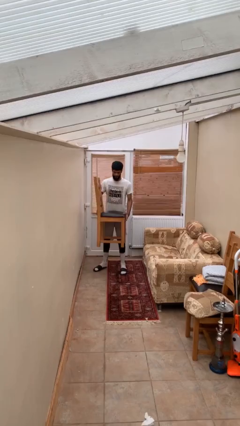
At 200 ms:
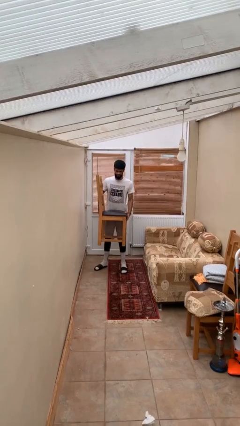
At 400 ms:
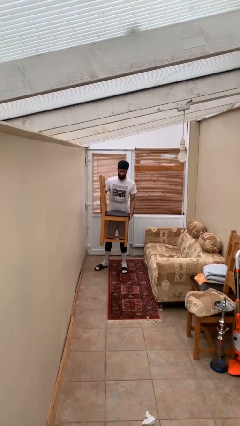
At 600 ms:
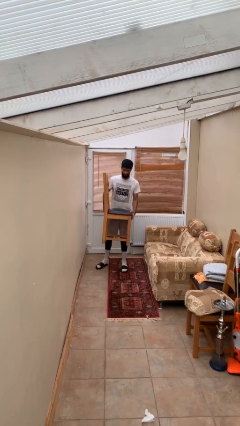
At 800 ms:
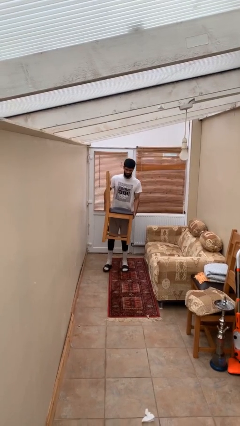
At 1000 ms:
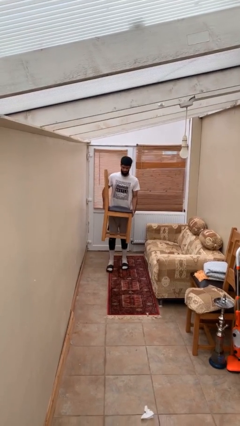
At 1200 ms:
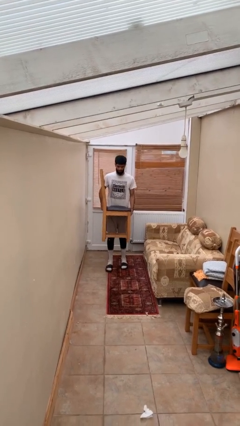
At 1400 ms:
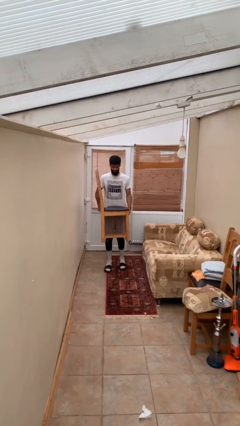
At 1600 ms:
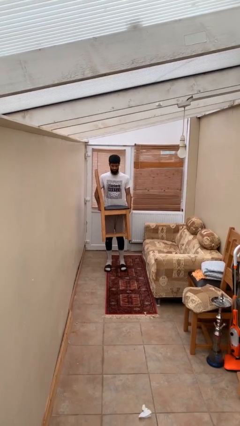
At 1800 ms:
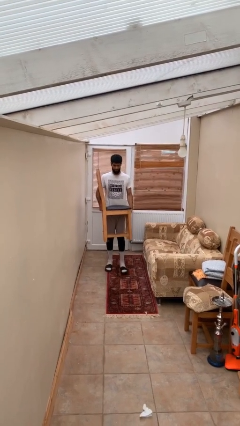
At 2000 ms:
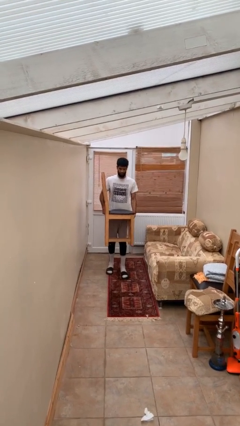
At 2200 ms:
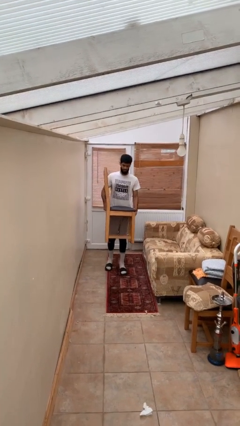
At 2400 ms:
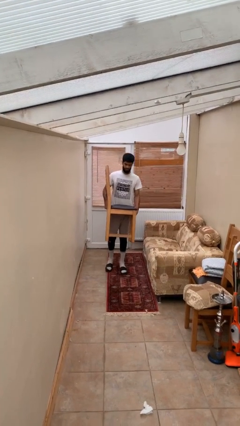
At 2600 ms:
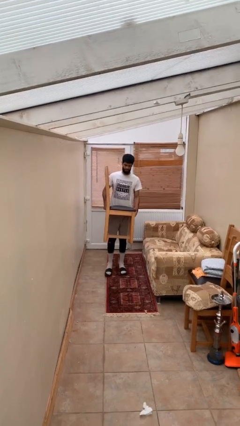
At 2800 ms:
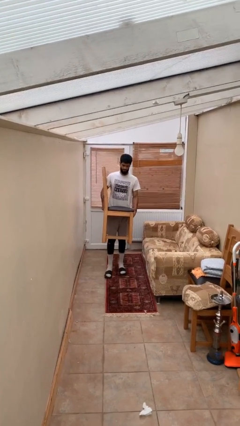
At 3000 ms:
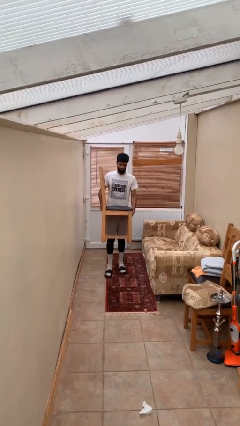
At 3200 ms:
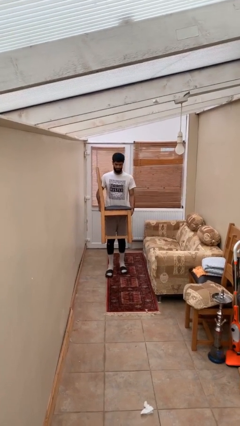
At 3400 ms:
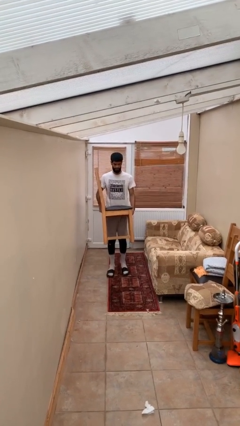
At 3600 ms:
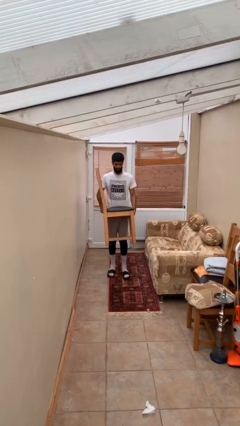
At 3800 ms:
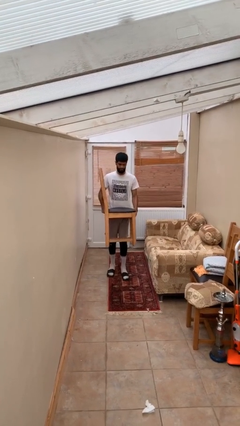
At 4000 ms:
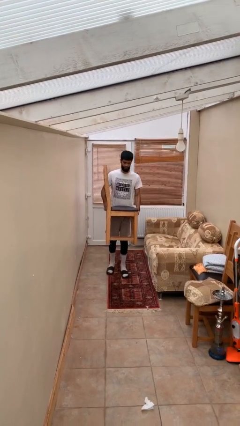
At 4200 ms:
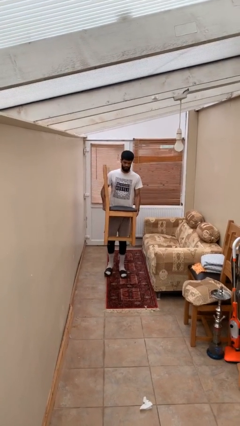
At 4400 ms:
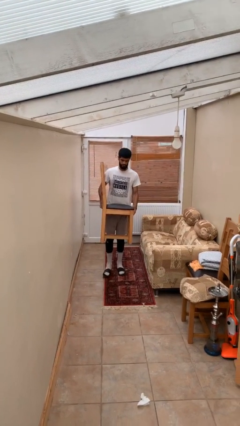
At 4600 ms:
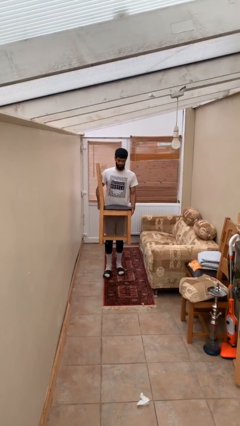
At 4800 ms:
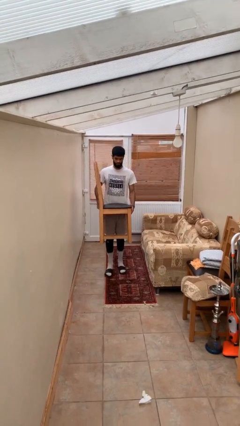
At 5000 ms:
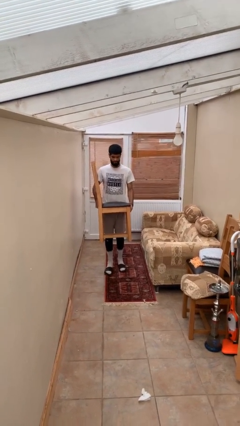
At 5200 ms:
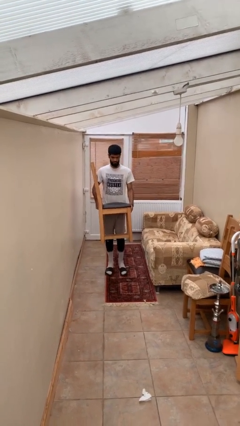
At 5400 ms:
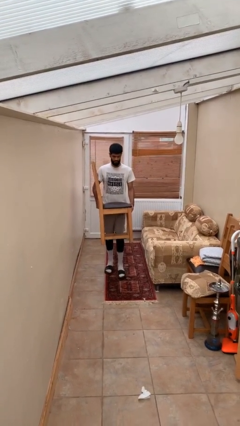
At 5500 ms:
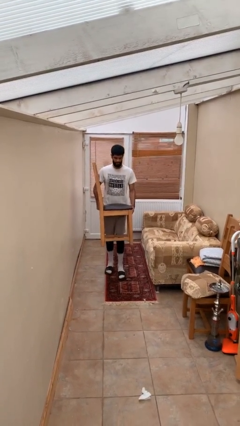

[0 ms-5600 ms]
person carries heavy object

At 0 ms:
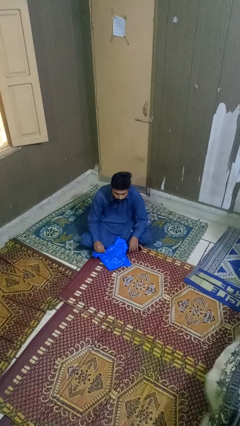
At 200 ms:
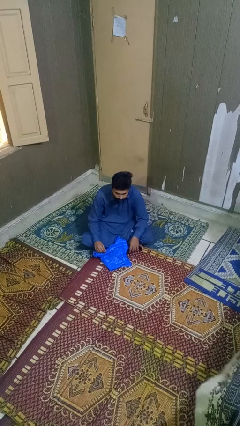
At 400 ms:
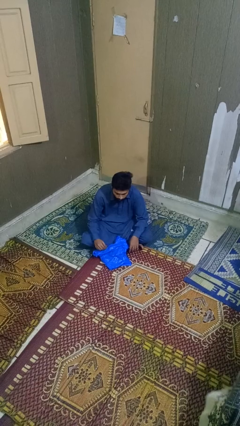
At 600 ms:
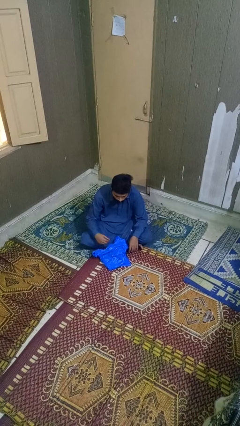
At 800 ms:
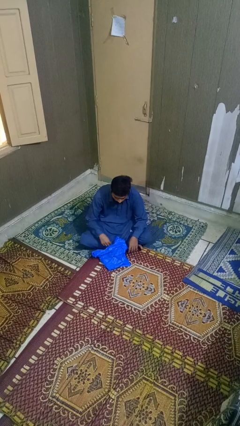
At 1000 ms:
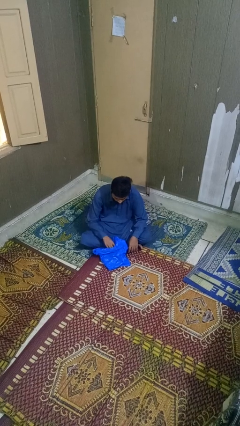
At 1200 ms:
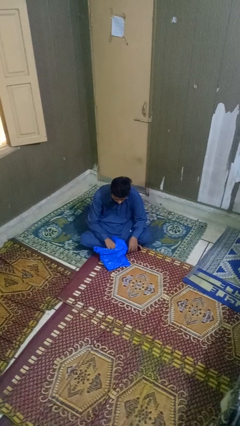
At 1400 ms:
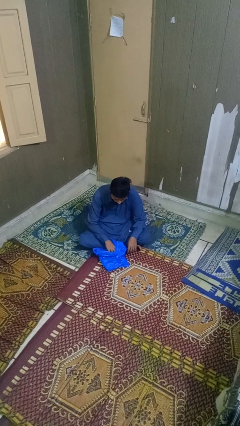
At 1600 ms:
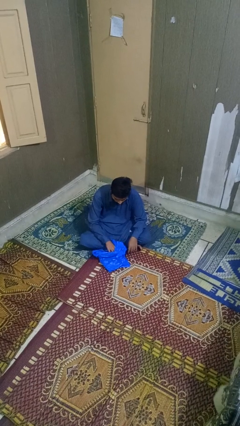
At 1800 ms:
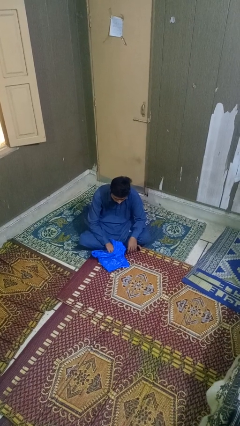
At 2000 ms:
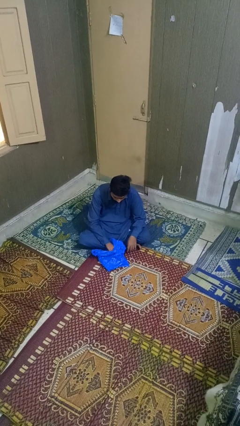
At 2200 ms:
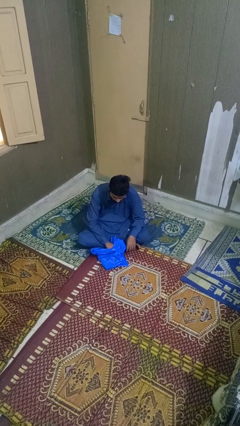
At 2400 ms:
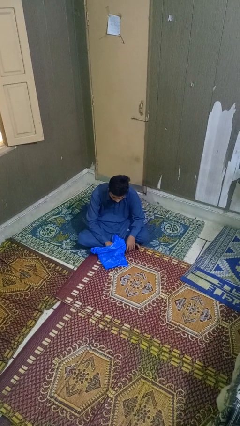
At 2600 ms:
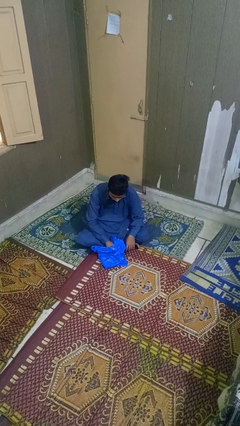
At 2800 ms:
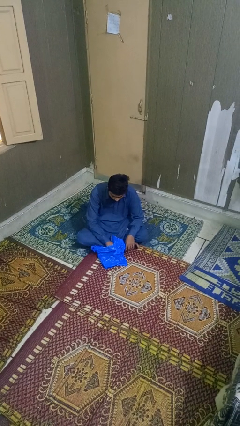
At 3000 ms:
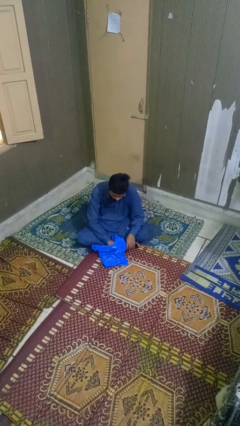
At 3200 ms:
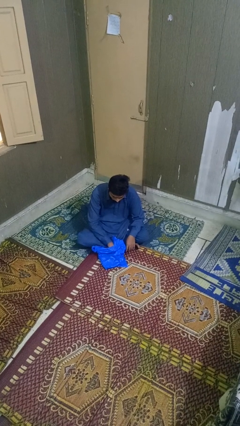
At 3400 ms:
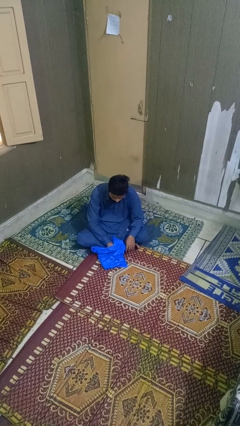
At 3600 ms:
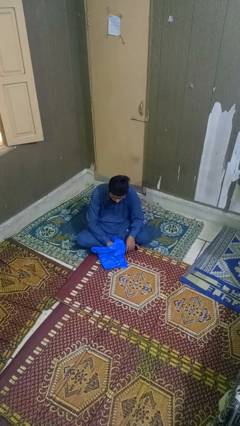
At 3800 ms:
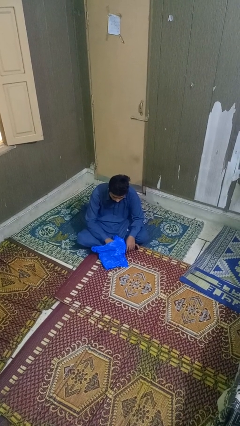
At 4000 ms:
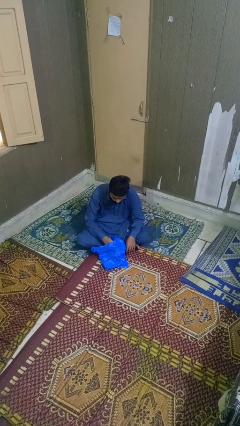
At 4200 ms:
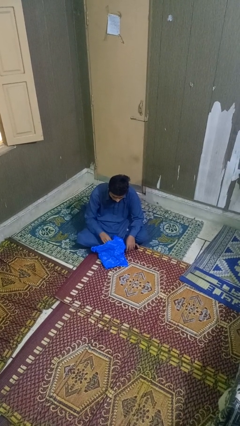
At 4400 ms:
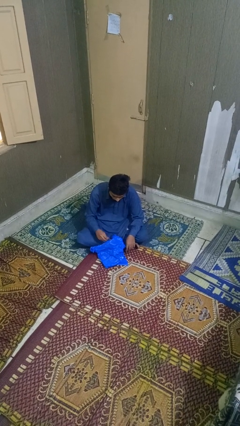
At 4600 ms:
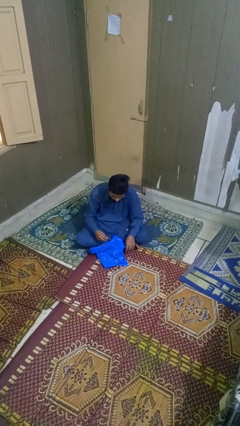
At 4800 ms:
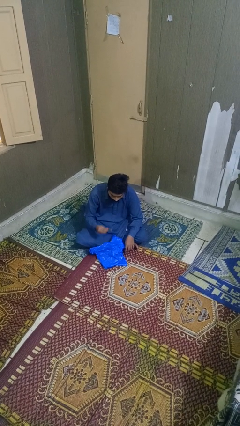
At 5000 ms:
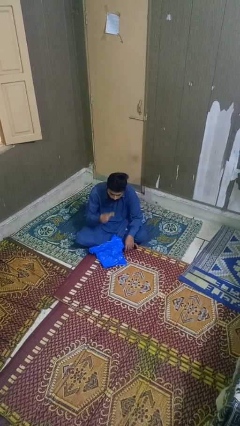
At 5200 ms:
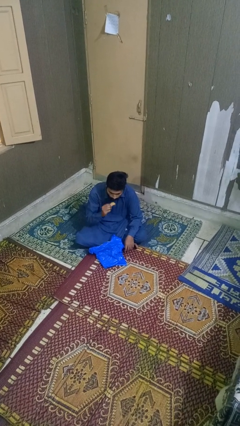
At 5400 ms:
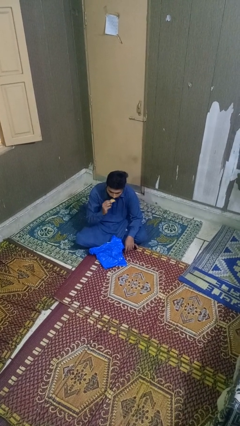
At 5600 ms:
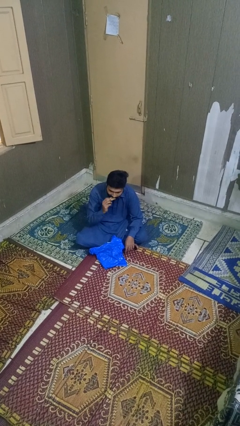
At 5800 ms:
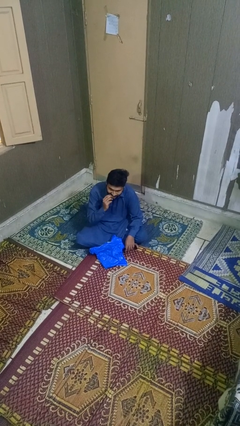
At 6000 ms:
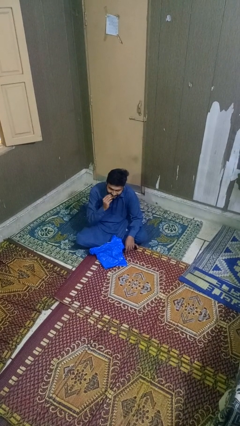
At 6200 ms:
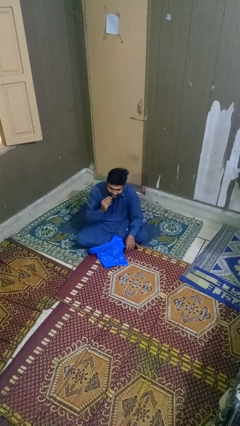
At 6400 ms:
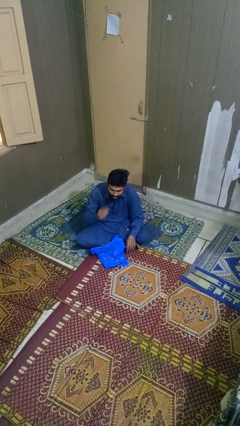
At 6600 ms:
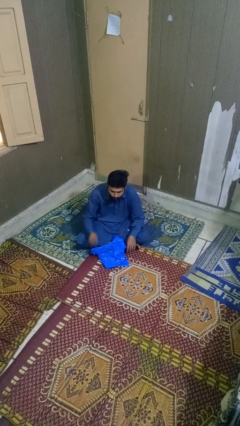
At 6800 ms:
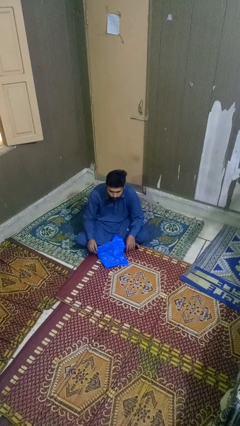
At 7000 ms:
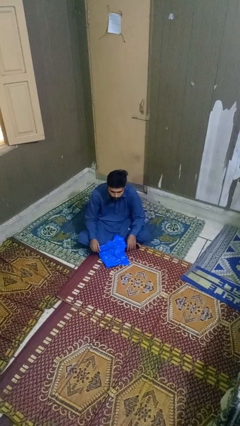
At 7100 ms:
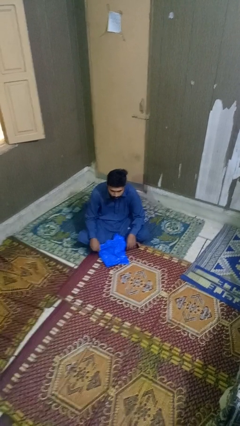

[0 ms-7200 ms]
person eats snack from bag

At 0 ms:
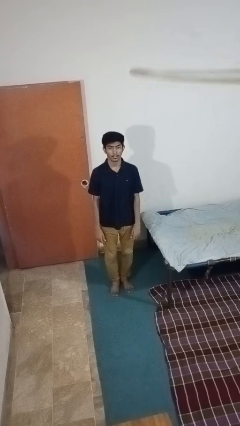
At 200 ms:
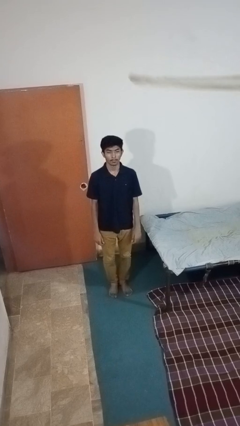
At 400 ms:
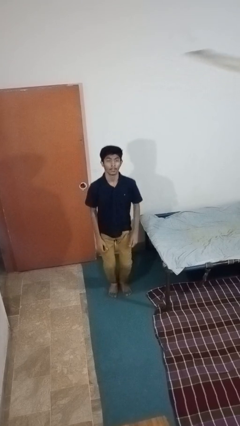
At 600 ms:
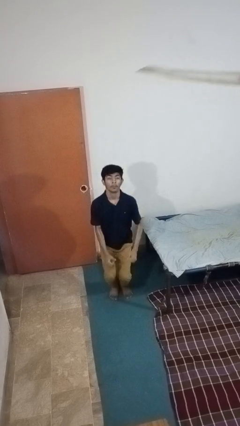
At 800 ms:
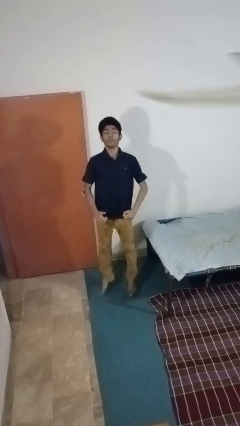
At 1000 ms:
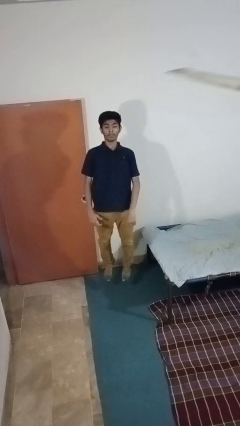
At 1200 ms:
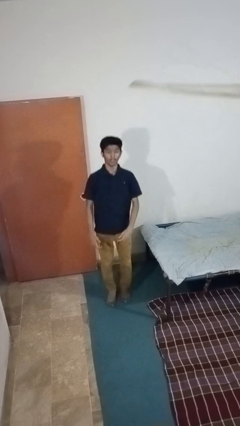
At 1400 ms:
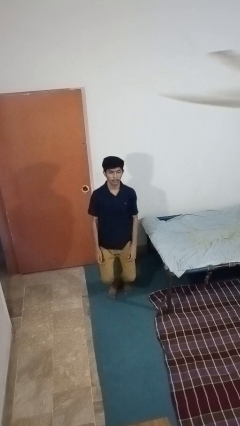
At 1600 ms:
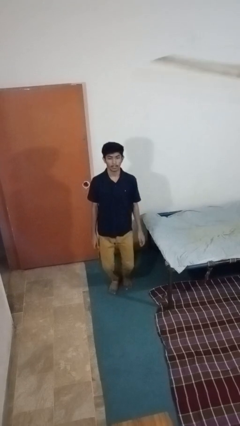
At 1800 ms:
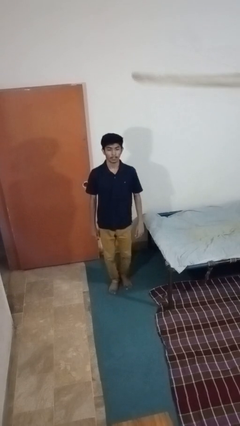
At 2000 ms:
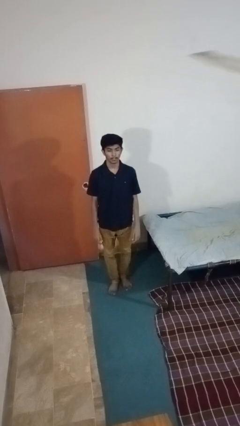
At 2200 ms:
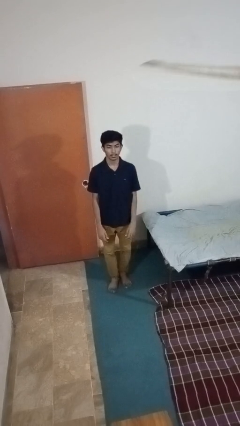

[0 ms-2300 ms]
person jumps

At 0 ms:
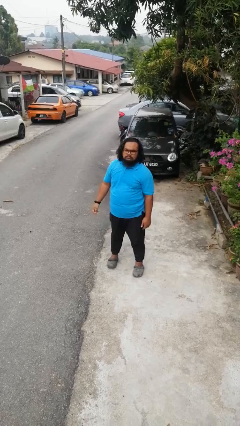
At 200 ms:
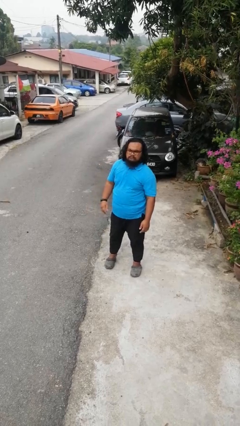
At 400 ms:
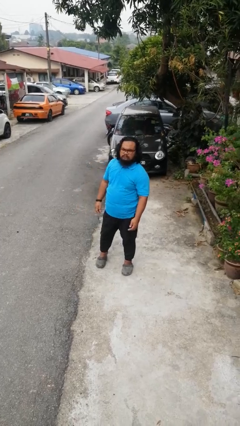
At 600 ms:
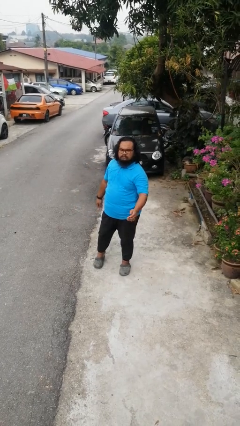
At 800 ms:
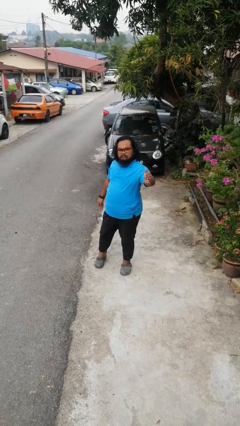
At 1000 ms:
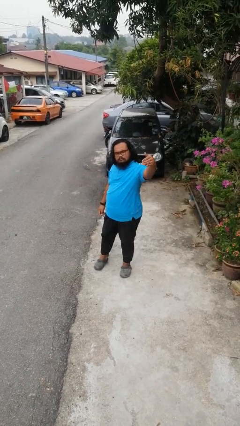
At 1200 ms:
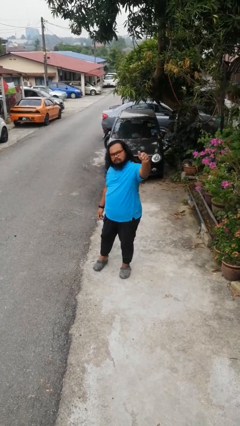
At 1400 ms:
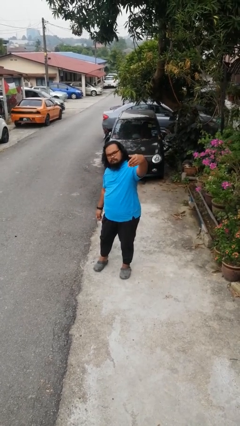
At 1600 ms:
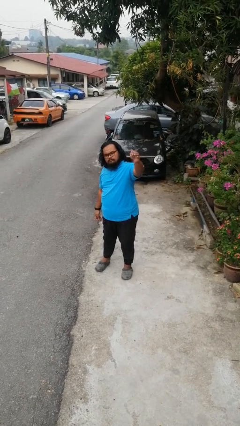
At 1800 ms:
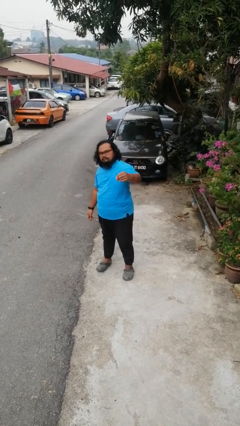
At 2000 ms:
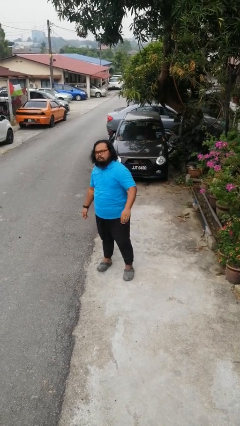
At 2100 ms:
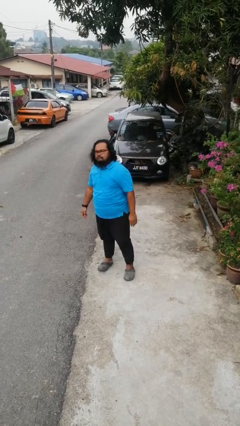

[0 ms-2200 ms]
person gestures come here

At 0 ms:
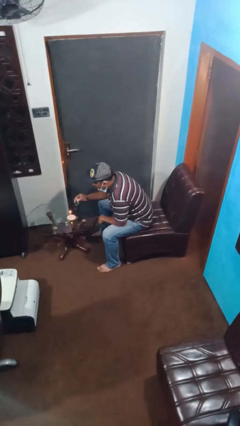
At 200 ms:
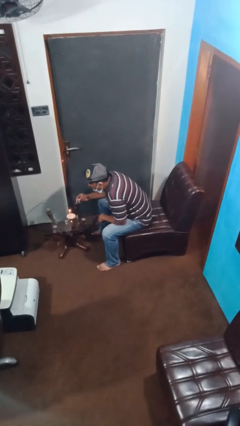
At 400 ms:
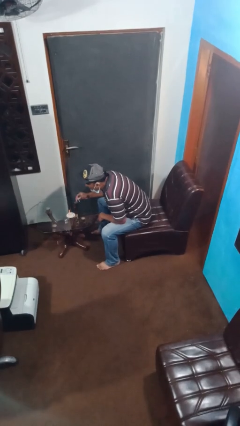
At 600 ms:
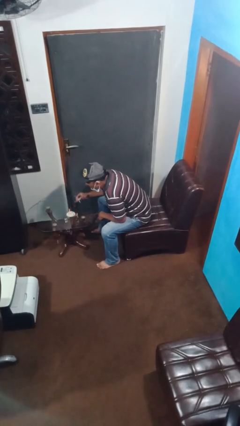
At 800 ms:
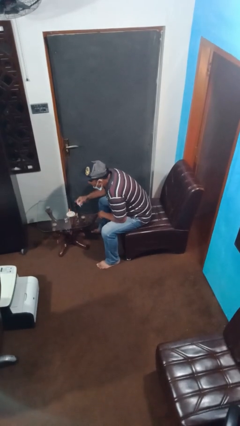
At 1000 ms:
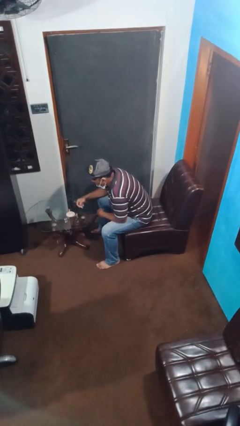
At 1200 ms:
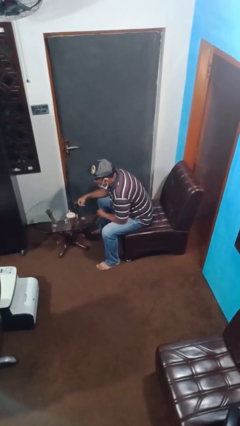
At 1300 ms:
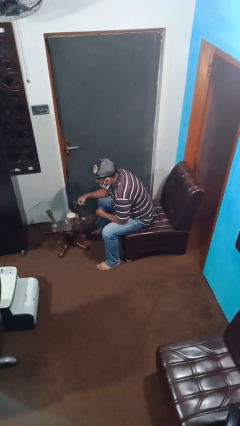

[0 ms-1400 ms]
person extinguishes candle
